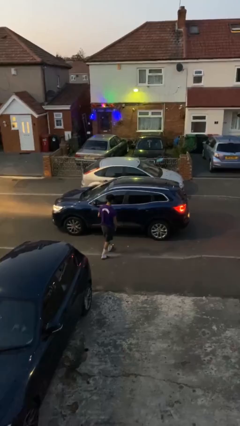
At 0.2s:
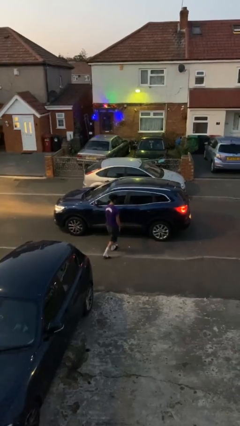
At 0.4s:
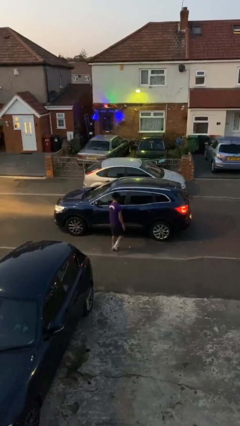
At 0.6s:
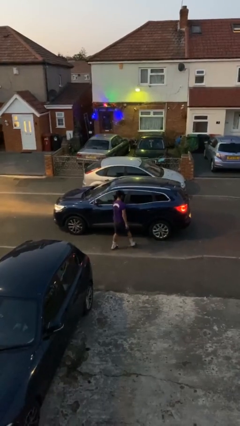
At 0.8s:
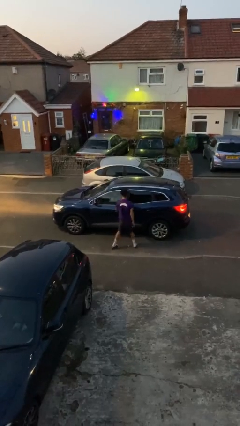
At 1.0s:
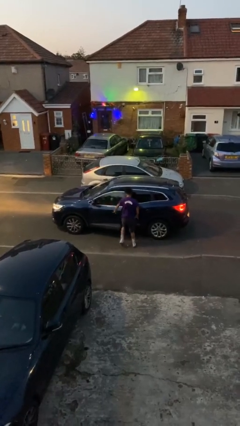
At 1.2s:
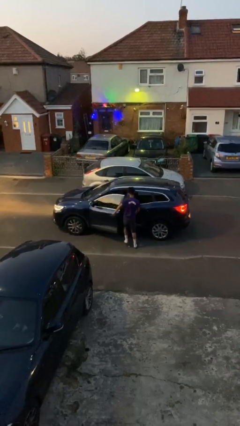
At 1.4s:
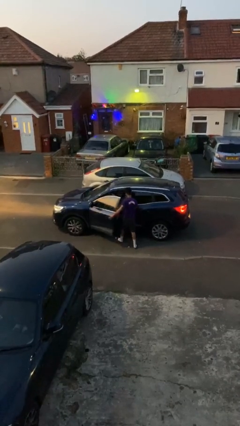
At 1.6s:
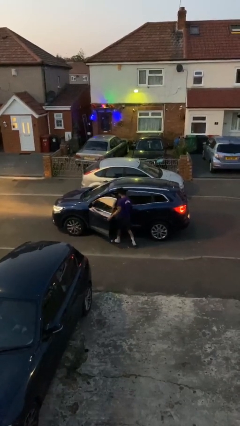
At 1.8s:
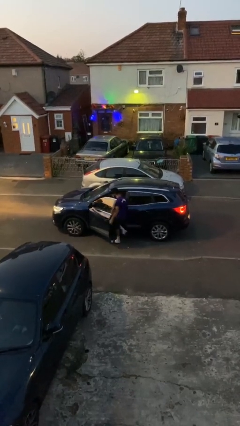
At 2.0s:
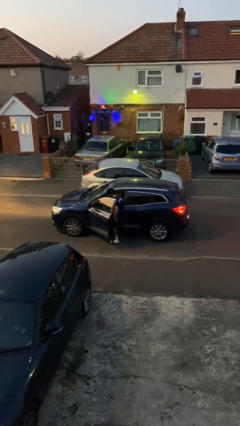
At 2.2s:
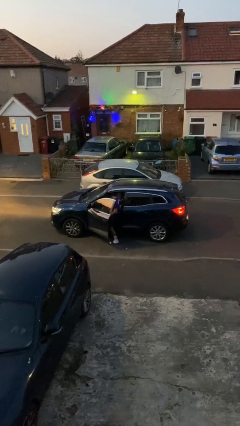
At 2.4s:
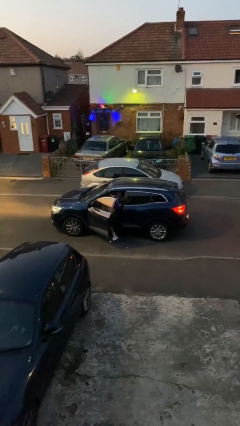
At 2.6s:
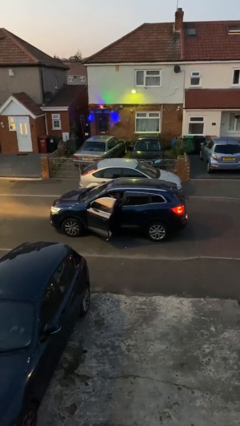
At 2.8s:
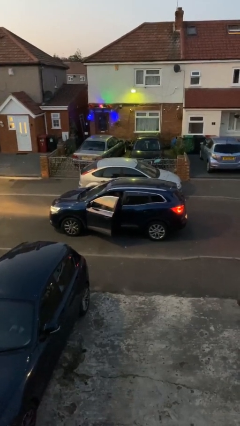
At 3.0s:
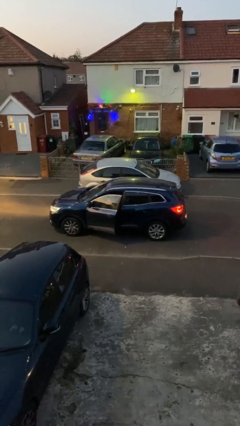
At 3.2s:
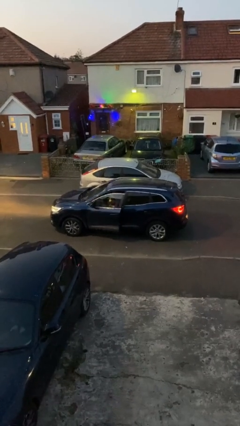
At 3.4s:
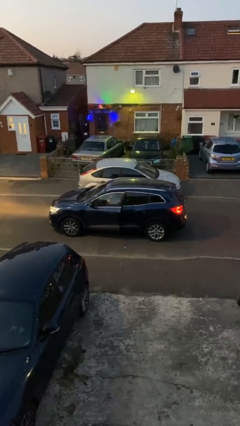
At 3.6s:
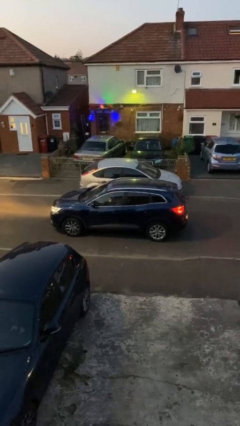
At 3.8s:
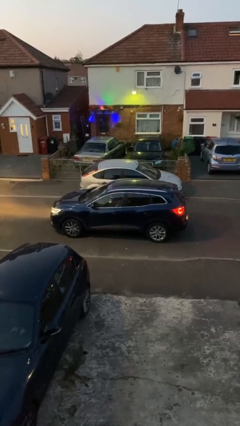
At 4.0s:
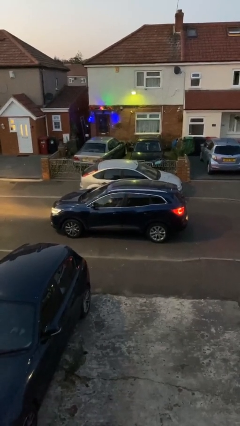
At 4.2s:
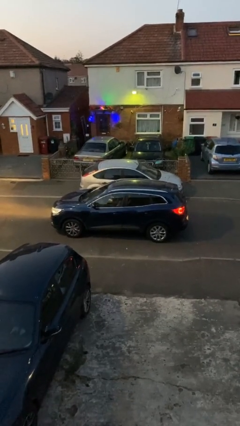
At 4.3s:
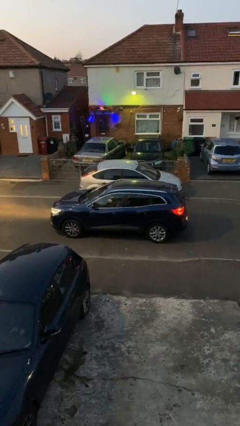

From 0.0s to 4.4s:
car picks up person

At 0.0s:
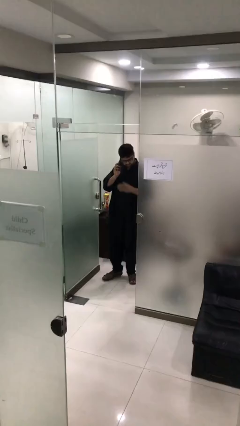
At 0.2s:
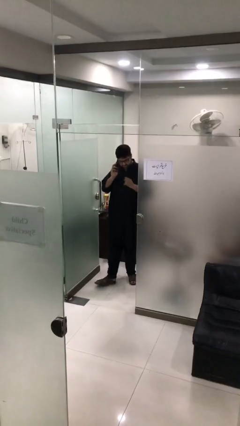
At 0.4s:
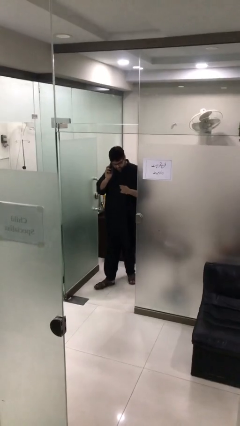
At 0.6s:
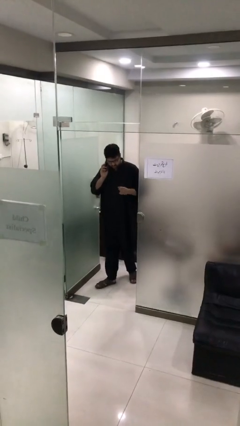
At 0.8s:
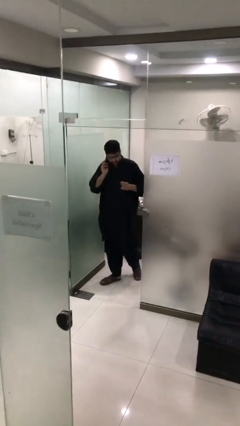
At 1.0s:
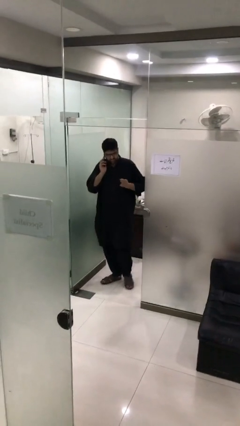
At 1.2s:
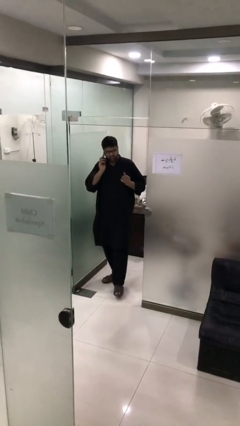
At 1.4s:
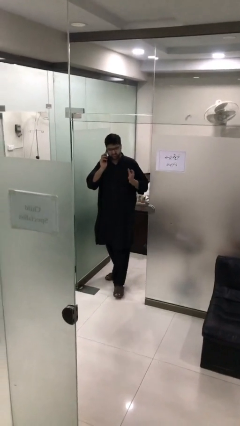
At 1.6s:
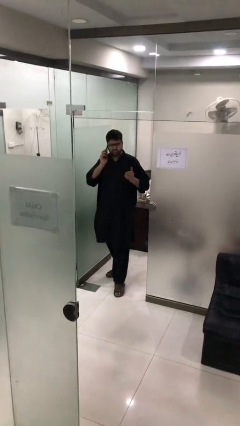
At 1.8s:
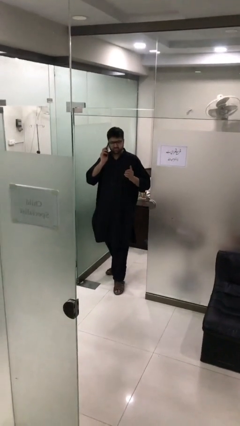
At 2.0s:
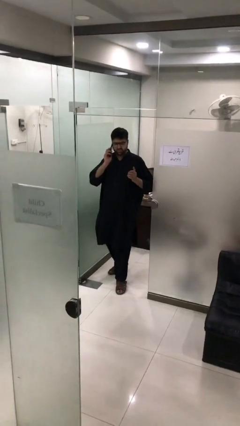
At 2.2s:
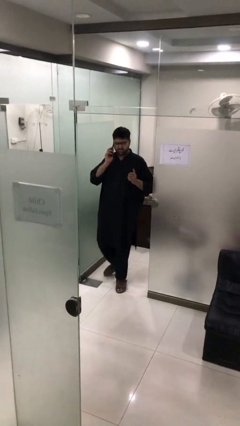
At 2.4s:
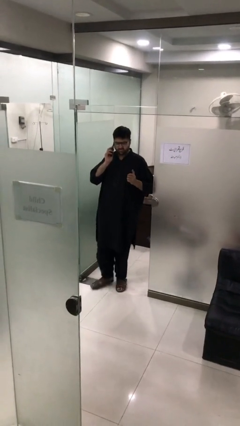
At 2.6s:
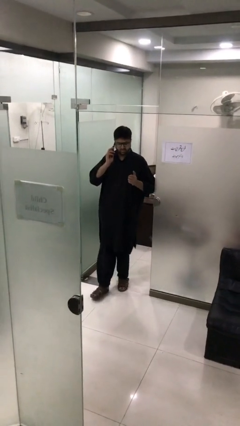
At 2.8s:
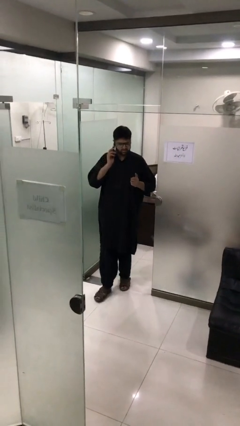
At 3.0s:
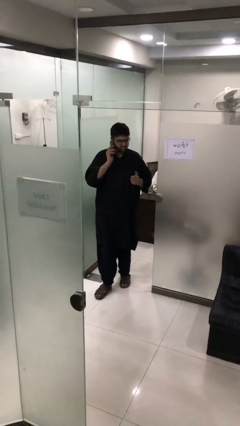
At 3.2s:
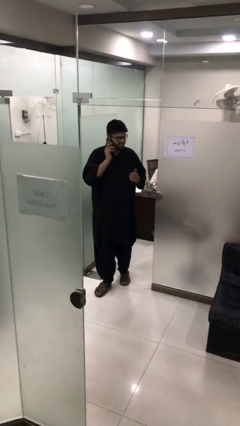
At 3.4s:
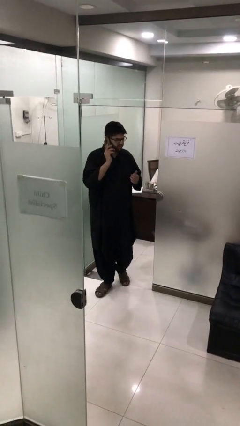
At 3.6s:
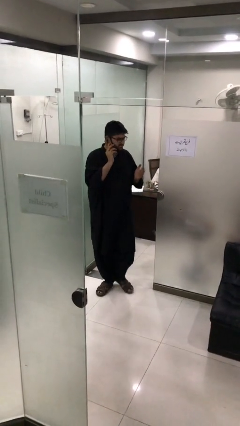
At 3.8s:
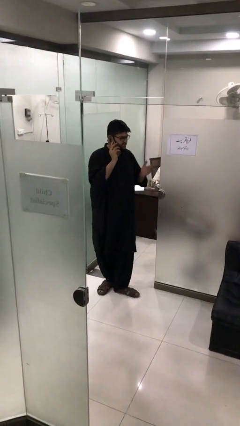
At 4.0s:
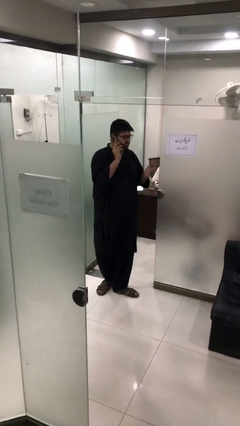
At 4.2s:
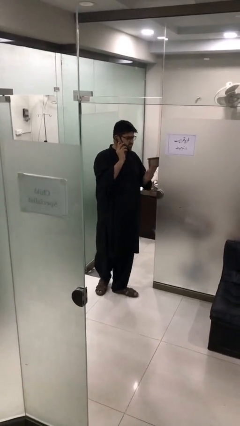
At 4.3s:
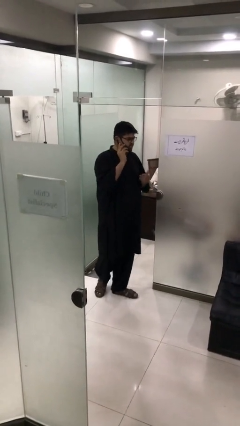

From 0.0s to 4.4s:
person enters scene through structure

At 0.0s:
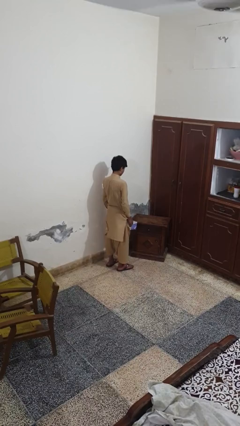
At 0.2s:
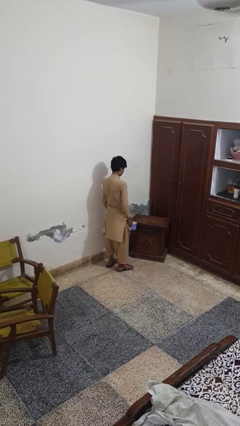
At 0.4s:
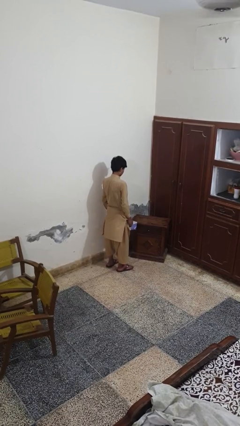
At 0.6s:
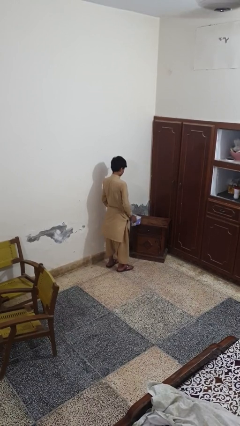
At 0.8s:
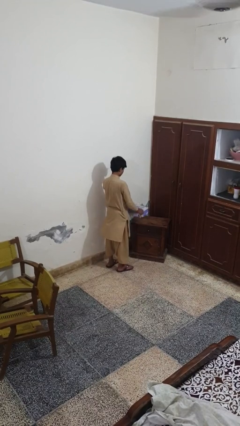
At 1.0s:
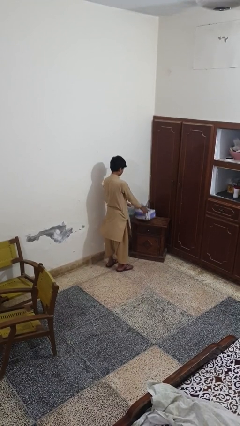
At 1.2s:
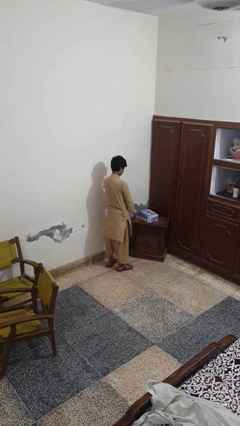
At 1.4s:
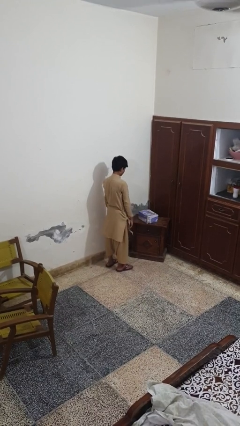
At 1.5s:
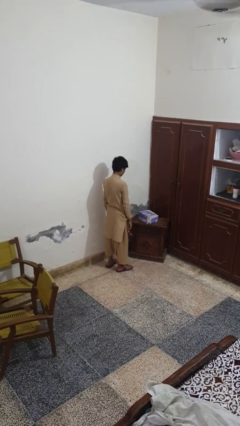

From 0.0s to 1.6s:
person throws object on table

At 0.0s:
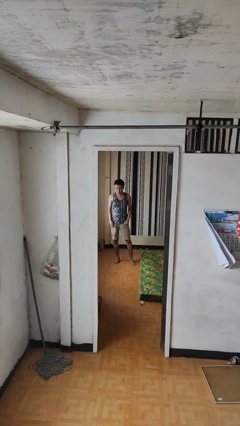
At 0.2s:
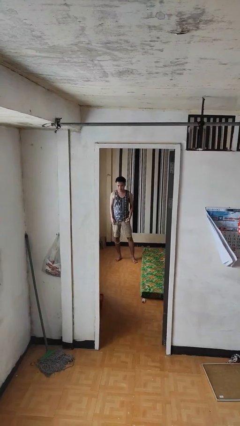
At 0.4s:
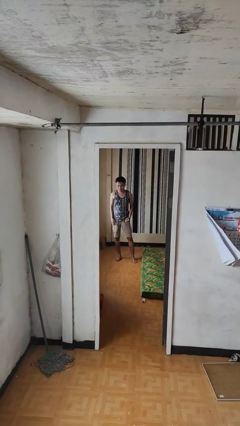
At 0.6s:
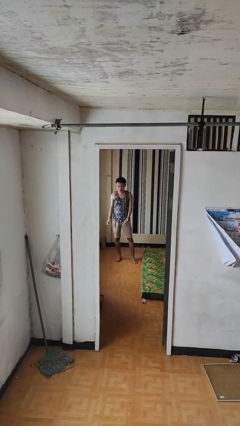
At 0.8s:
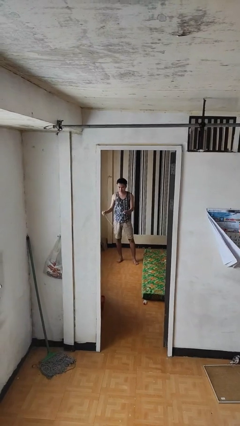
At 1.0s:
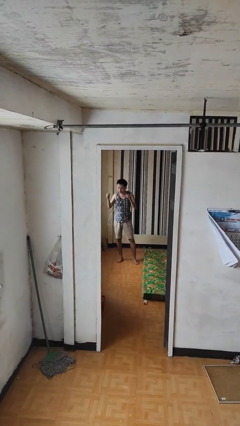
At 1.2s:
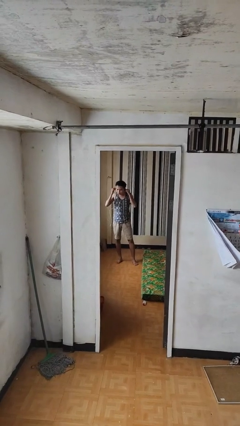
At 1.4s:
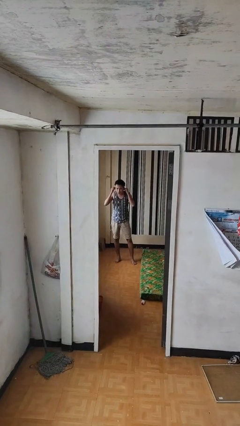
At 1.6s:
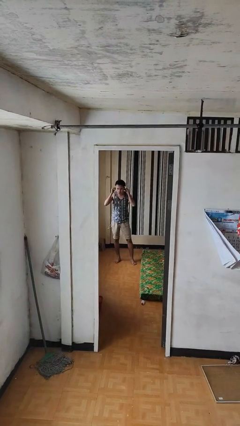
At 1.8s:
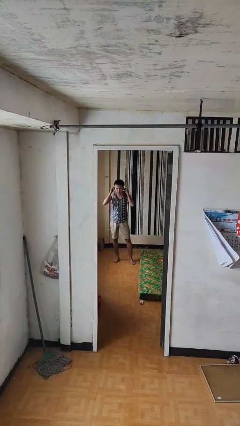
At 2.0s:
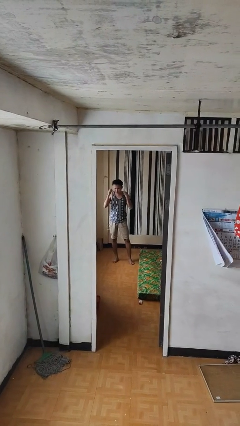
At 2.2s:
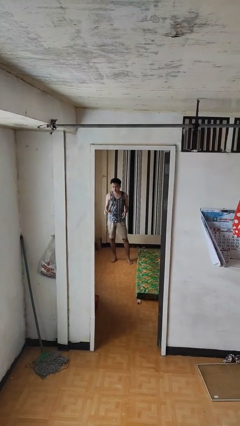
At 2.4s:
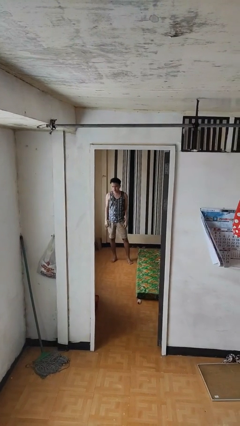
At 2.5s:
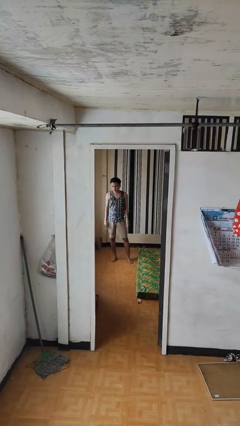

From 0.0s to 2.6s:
person puts on headphones

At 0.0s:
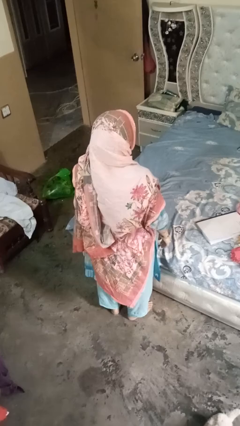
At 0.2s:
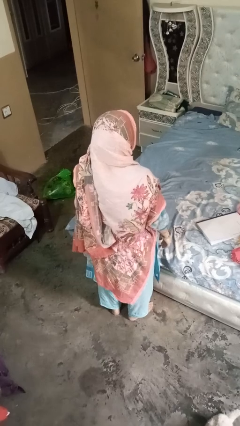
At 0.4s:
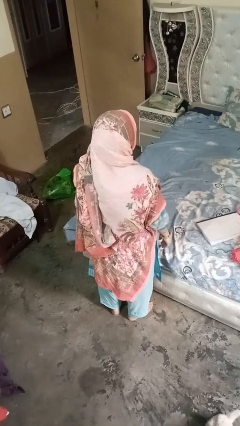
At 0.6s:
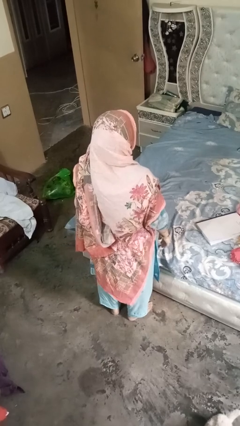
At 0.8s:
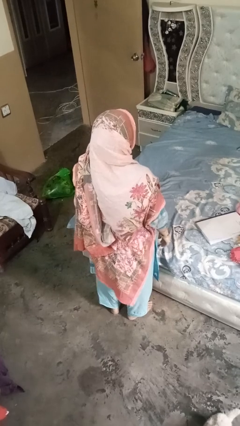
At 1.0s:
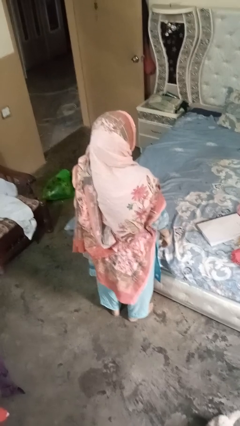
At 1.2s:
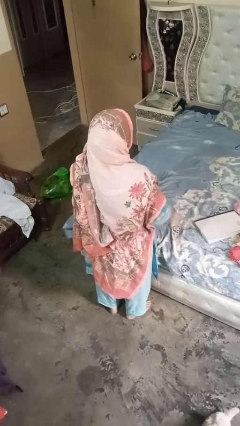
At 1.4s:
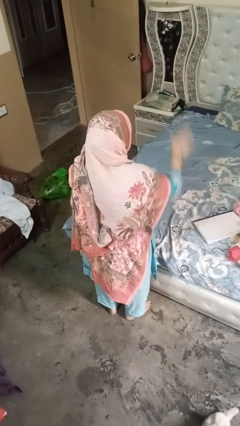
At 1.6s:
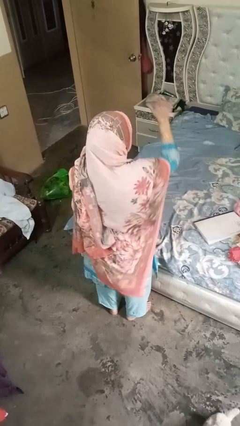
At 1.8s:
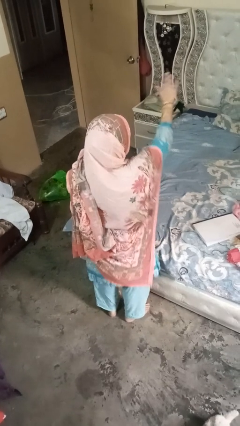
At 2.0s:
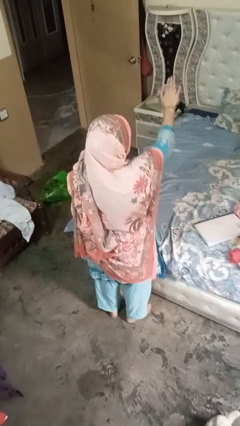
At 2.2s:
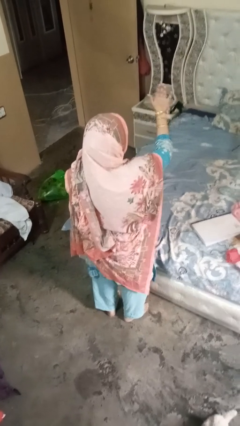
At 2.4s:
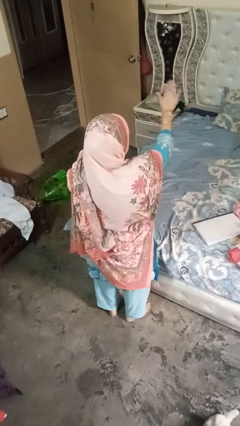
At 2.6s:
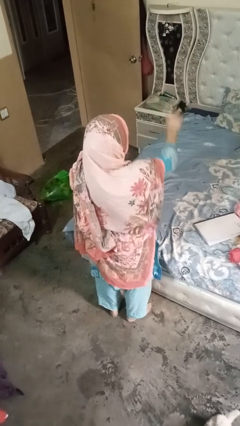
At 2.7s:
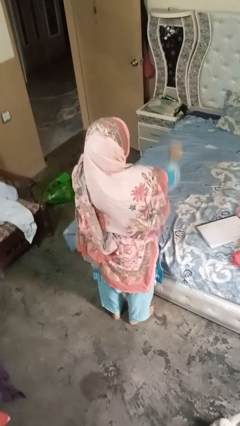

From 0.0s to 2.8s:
person gestures stop

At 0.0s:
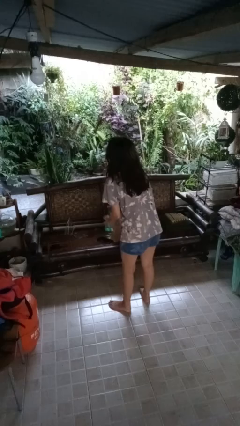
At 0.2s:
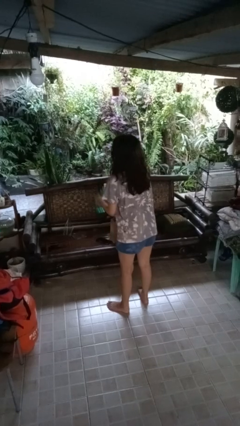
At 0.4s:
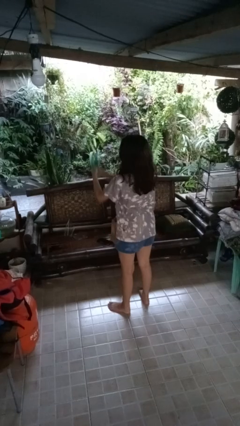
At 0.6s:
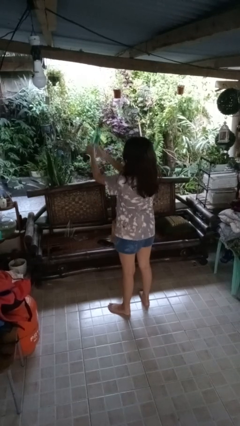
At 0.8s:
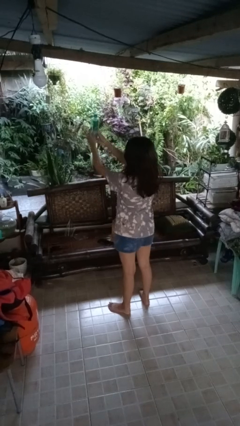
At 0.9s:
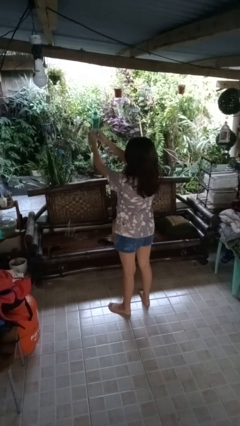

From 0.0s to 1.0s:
person catches dropped object

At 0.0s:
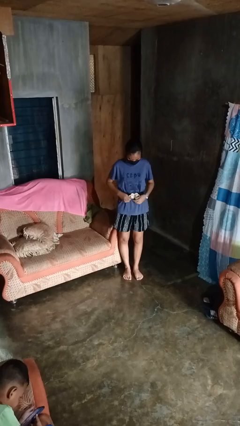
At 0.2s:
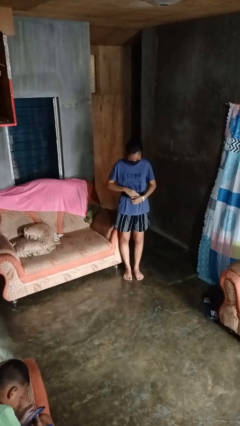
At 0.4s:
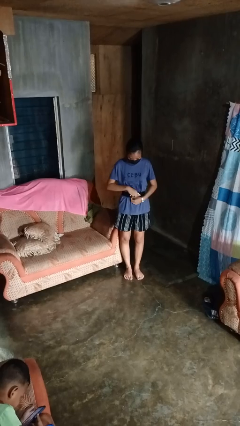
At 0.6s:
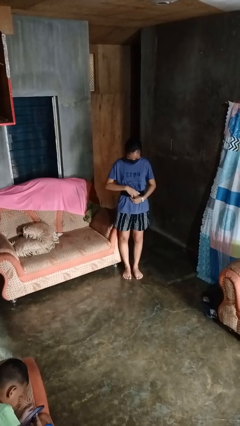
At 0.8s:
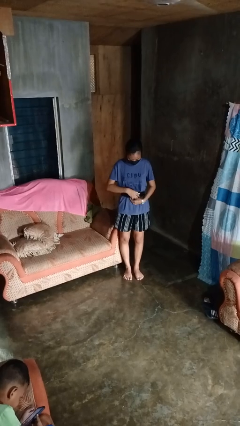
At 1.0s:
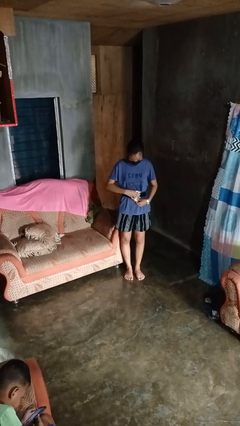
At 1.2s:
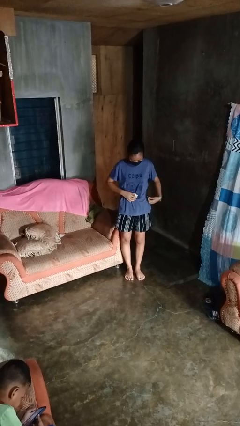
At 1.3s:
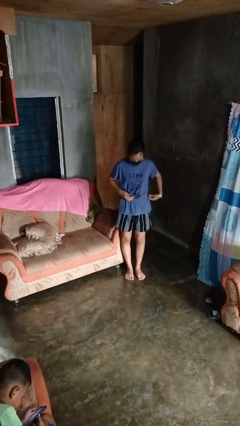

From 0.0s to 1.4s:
person takes off belt
